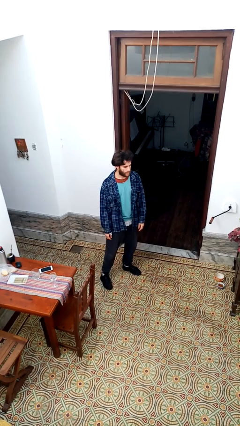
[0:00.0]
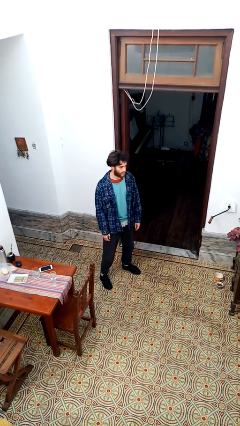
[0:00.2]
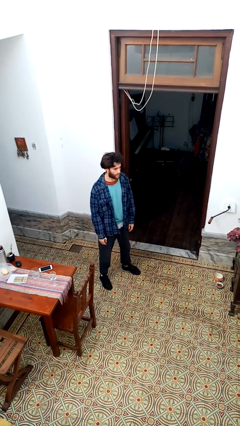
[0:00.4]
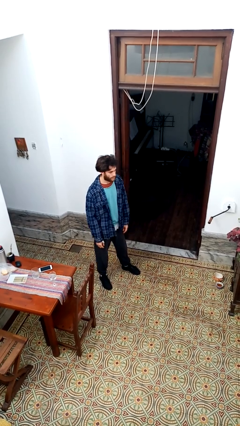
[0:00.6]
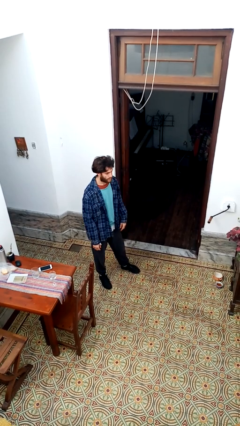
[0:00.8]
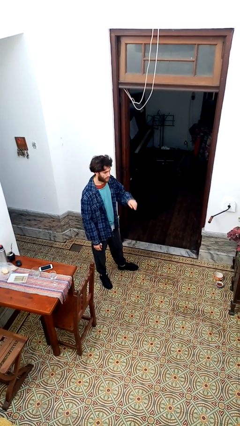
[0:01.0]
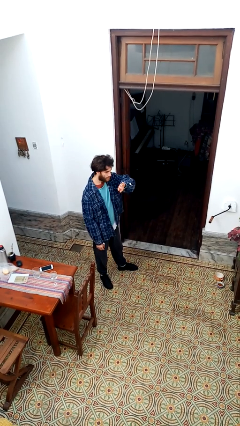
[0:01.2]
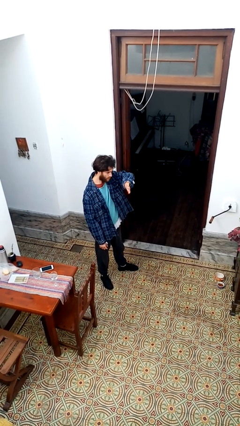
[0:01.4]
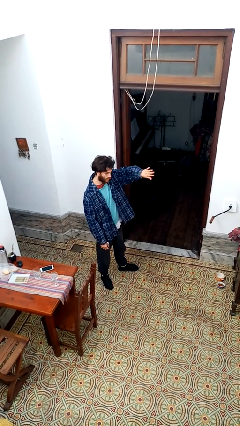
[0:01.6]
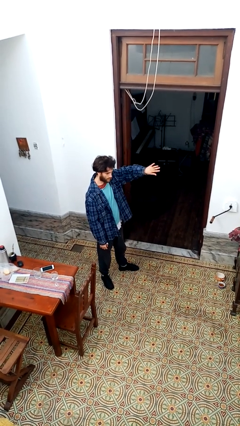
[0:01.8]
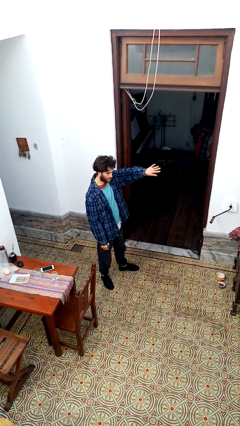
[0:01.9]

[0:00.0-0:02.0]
person gestures swipe left

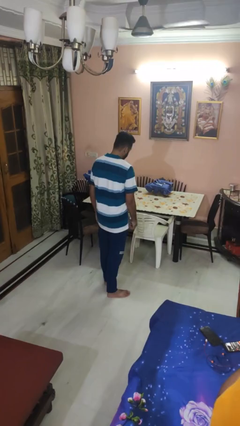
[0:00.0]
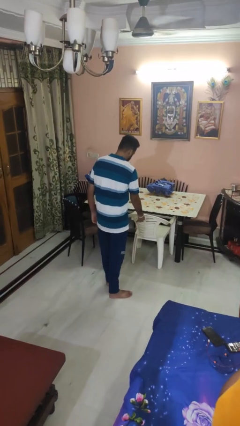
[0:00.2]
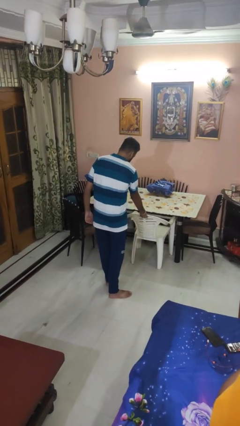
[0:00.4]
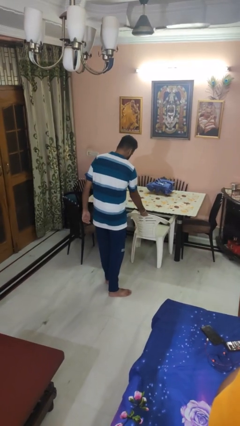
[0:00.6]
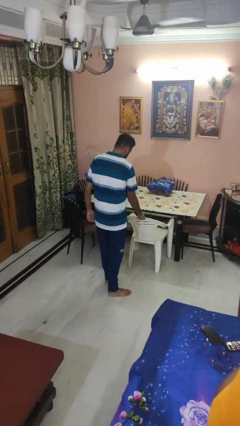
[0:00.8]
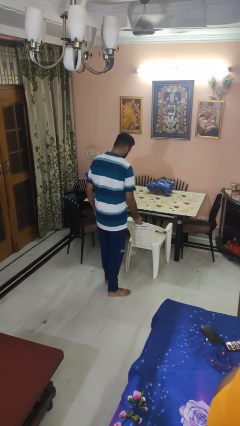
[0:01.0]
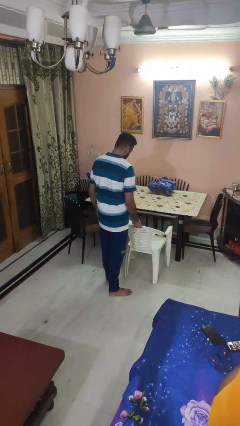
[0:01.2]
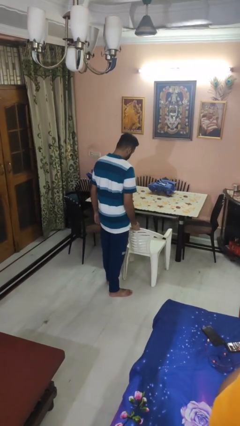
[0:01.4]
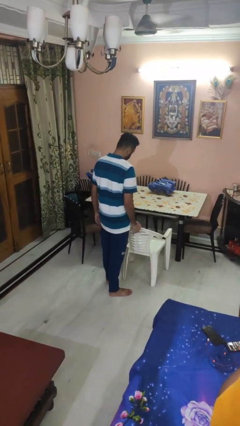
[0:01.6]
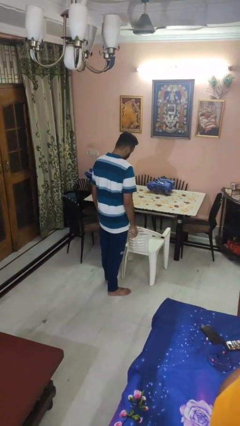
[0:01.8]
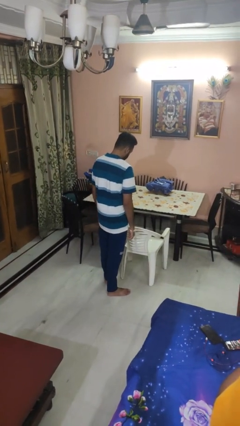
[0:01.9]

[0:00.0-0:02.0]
person pulls out chair

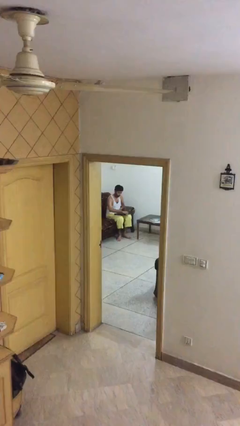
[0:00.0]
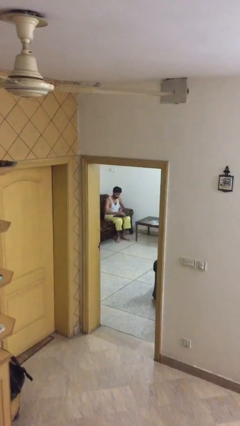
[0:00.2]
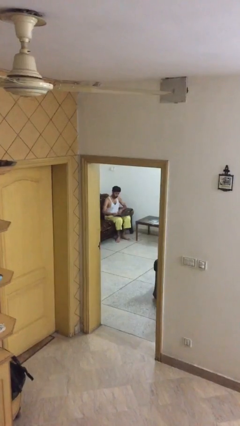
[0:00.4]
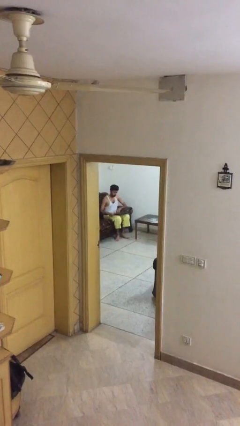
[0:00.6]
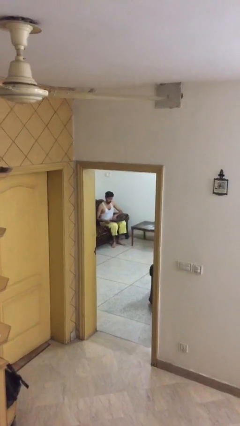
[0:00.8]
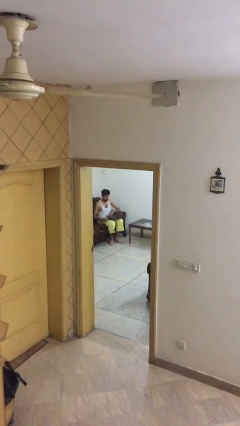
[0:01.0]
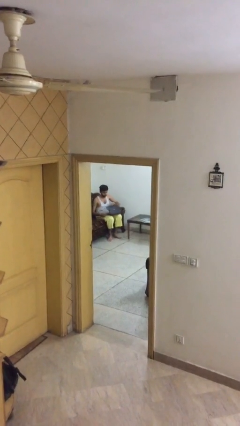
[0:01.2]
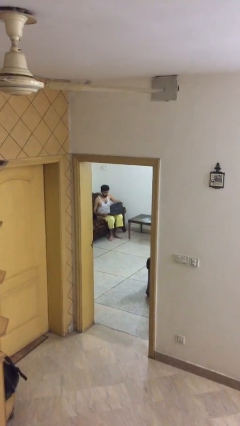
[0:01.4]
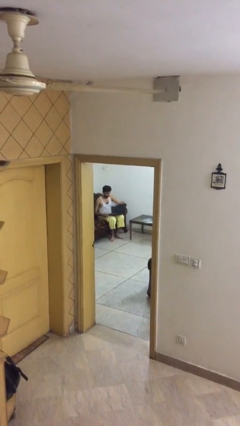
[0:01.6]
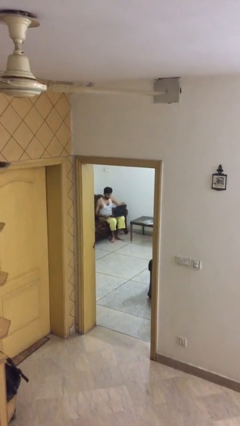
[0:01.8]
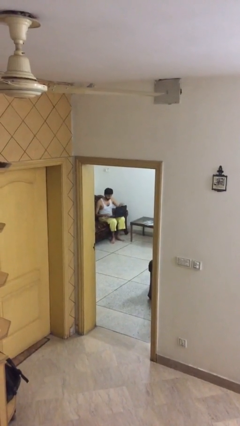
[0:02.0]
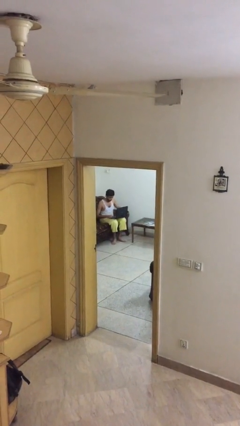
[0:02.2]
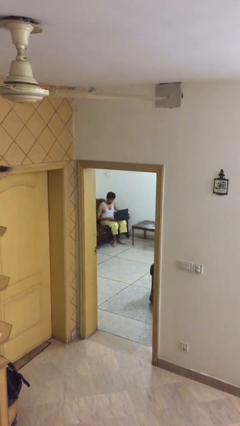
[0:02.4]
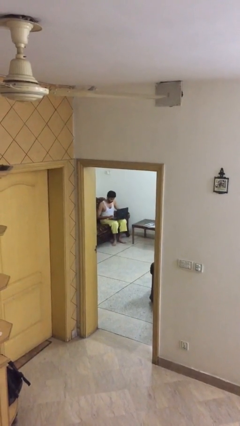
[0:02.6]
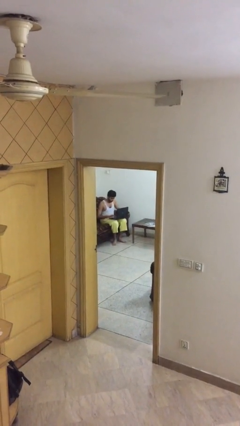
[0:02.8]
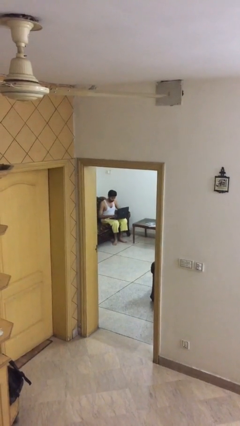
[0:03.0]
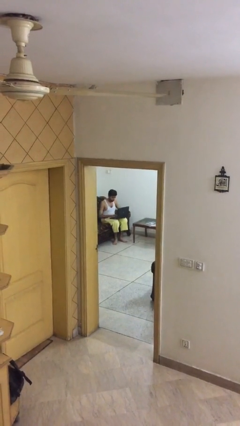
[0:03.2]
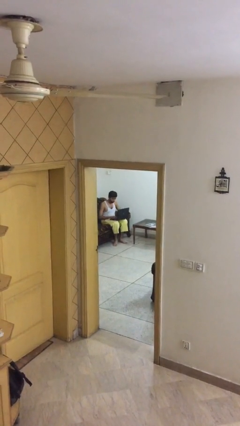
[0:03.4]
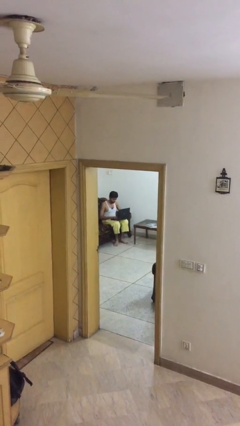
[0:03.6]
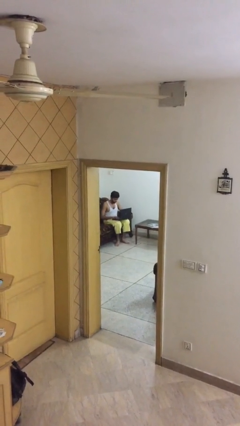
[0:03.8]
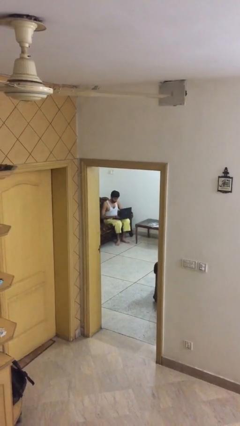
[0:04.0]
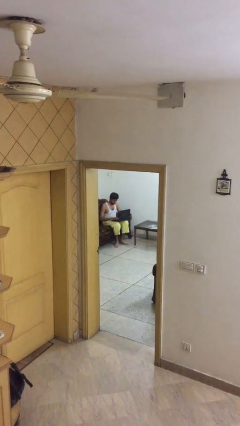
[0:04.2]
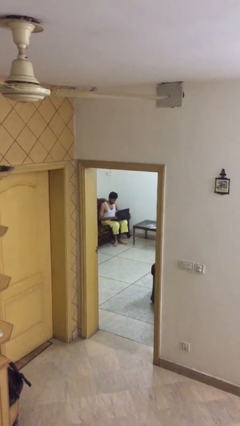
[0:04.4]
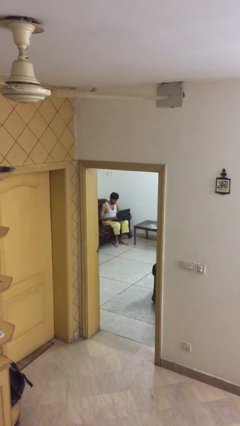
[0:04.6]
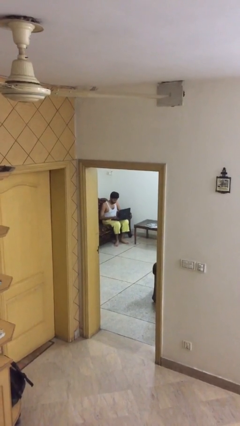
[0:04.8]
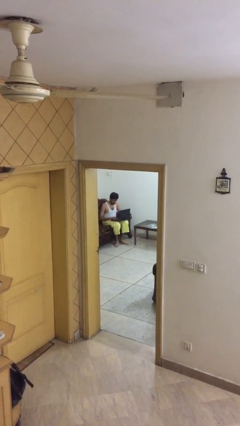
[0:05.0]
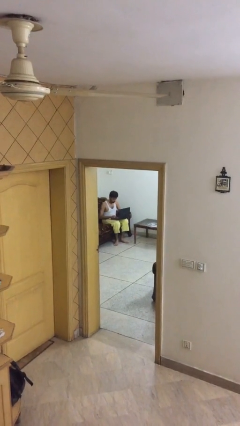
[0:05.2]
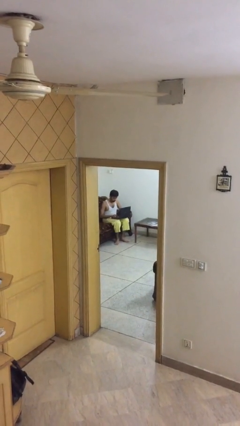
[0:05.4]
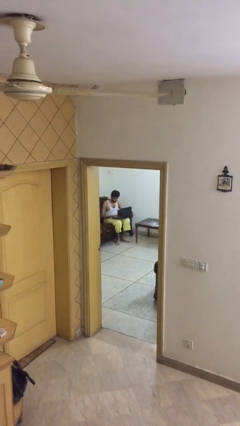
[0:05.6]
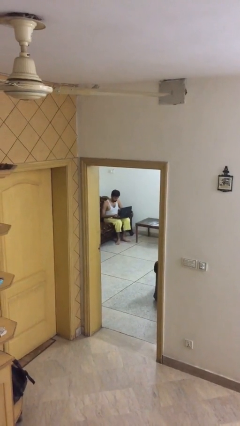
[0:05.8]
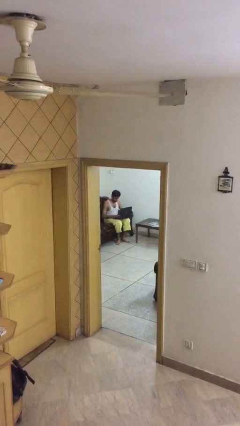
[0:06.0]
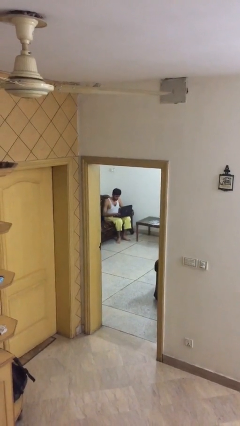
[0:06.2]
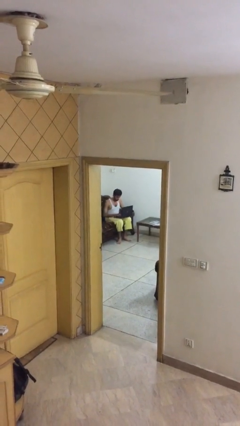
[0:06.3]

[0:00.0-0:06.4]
person interacts with laptop

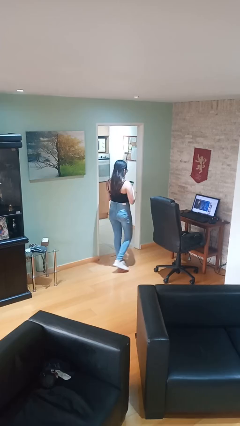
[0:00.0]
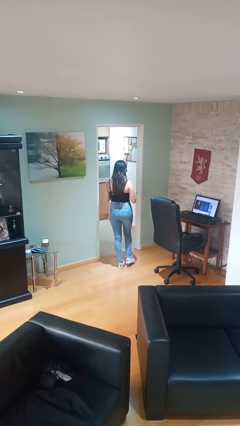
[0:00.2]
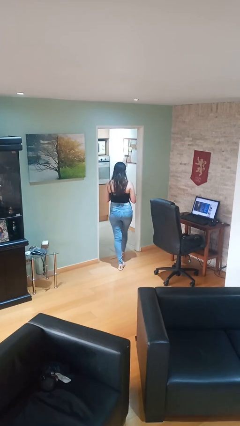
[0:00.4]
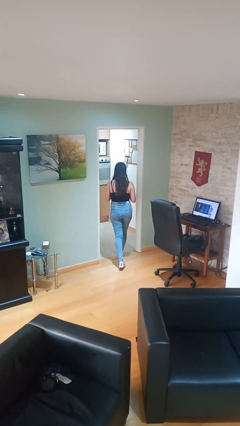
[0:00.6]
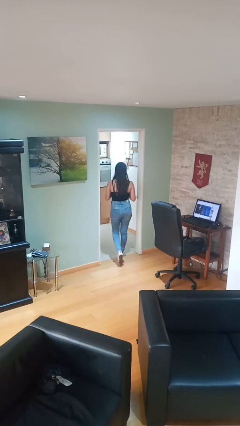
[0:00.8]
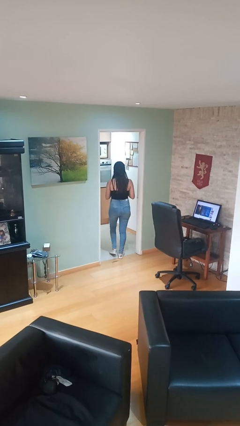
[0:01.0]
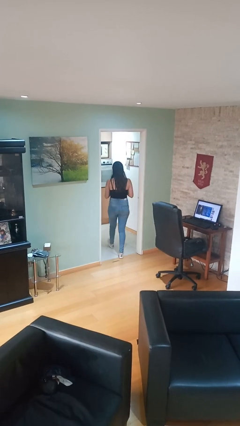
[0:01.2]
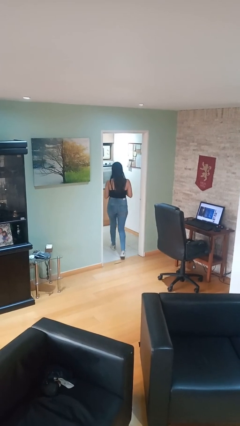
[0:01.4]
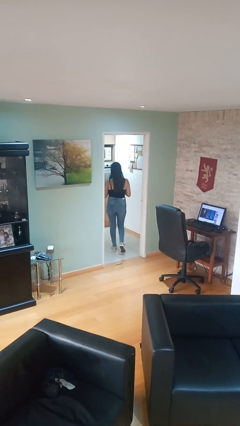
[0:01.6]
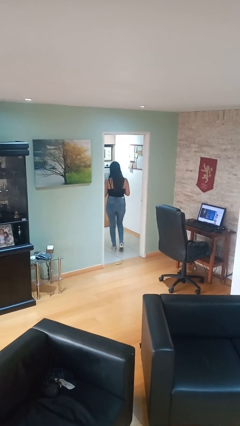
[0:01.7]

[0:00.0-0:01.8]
person exits scene through structure

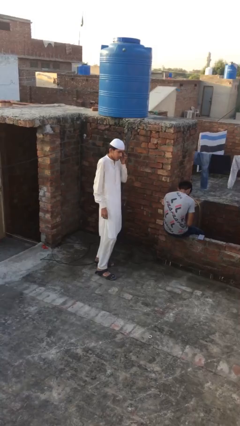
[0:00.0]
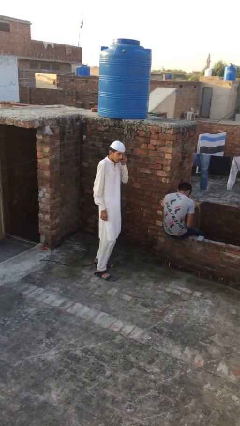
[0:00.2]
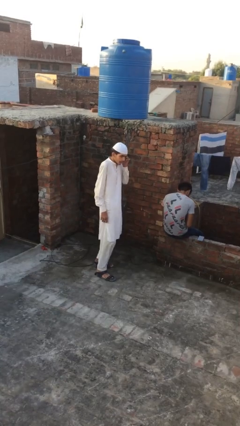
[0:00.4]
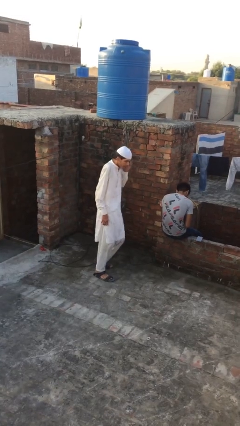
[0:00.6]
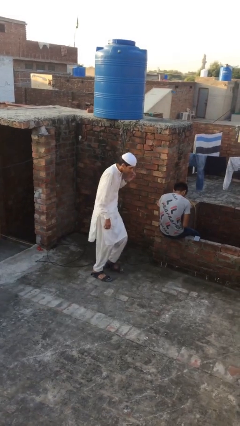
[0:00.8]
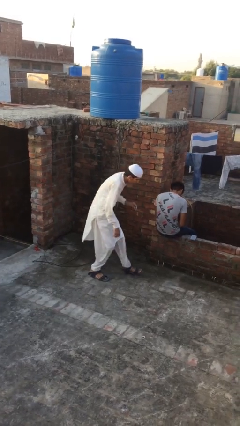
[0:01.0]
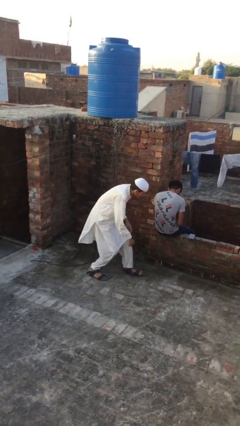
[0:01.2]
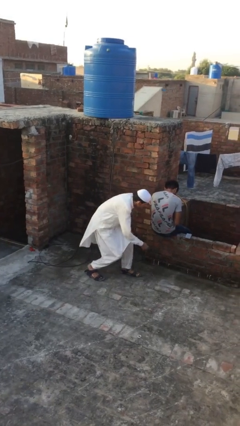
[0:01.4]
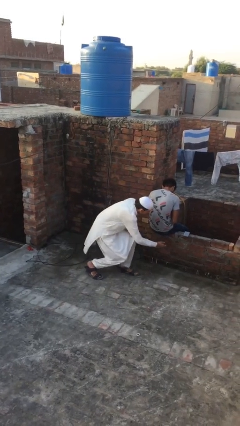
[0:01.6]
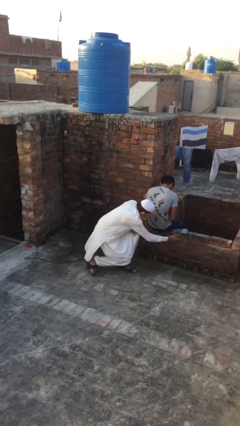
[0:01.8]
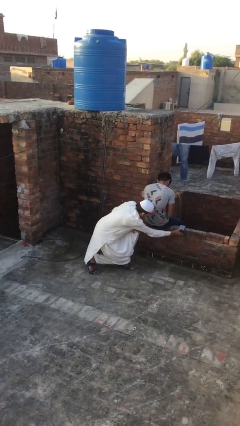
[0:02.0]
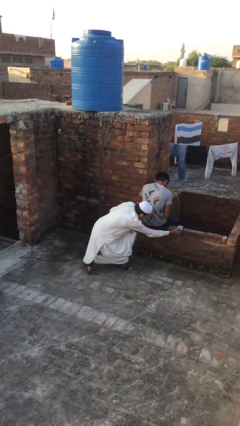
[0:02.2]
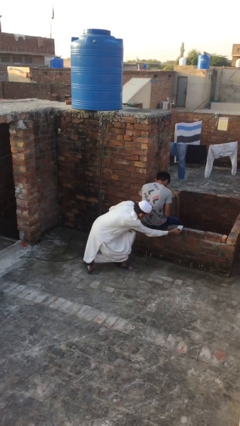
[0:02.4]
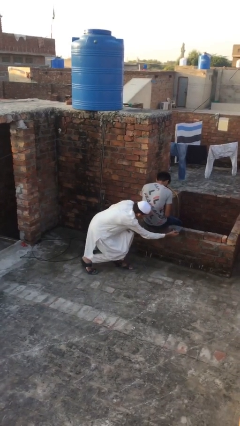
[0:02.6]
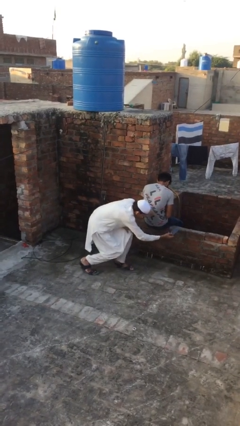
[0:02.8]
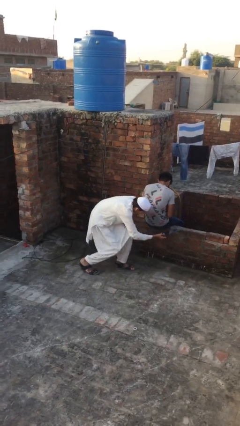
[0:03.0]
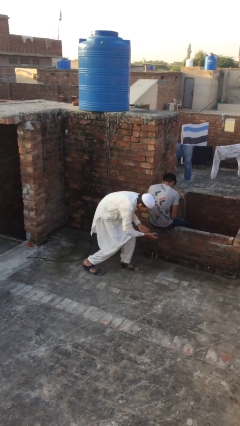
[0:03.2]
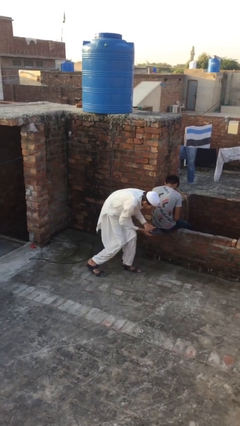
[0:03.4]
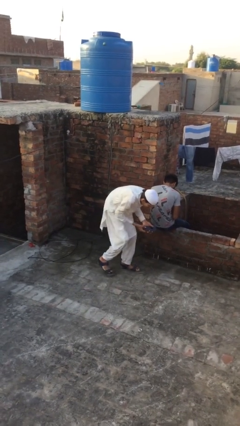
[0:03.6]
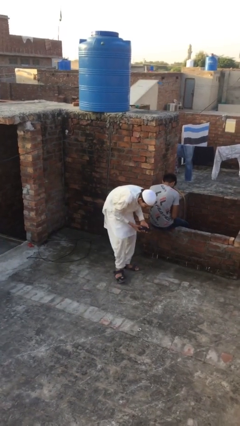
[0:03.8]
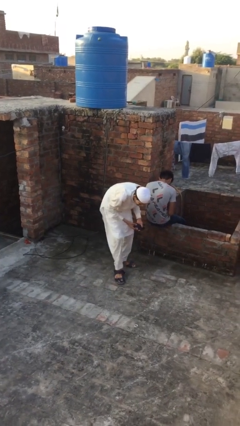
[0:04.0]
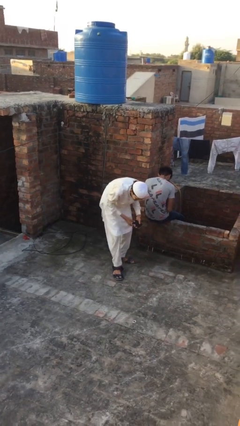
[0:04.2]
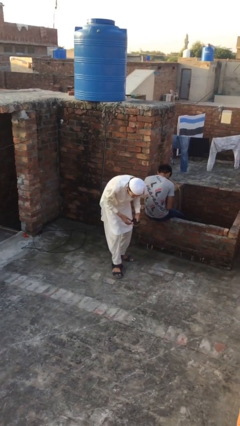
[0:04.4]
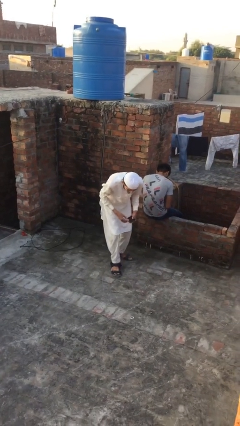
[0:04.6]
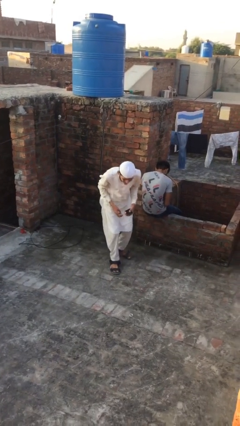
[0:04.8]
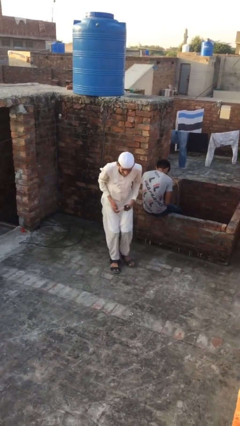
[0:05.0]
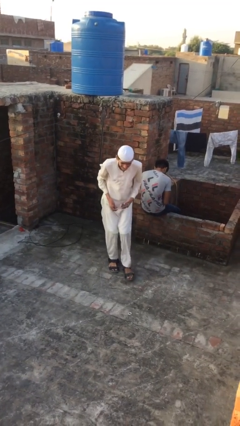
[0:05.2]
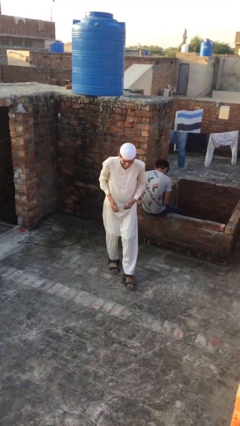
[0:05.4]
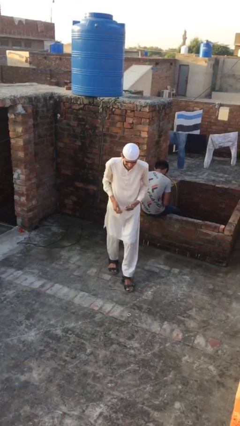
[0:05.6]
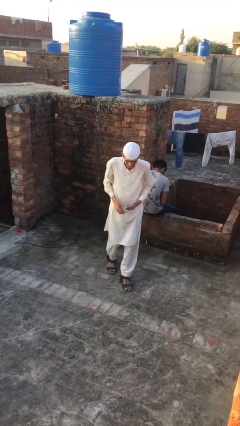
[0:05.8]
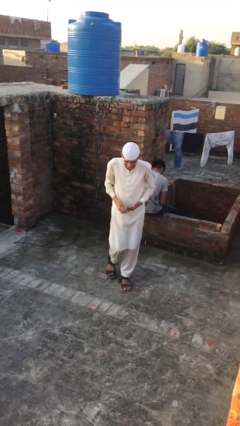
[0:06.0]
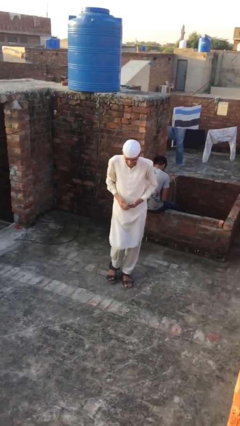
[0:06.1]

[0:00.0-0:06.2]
person steals object from person
